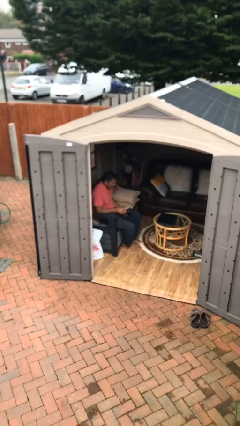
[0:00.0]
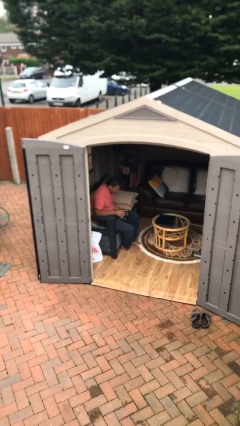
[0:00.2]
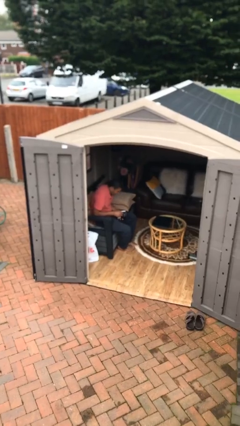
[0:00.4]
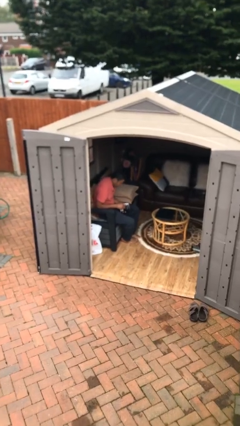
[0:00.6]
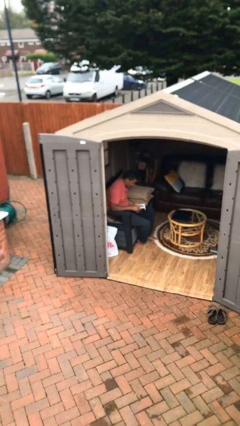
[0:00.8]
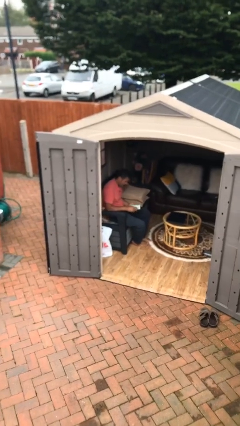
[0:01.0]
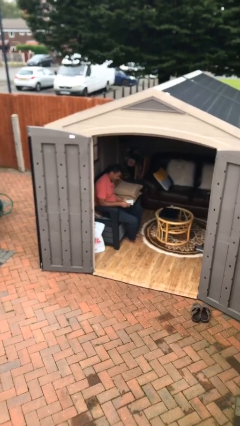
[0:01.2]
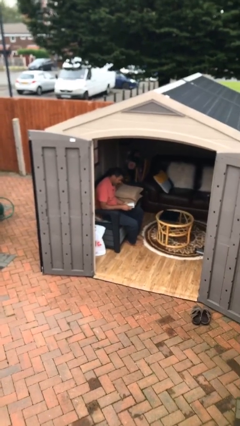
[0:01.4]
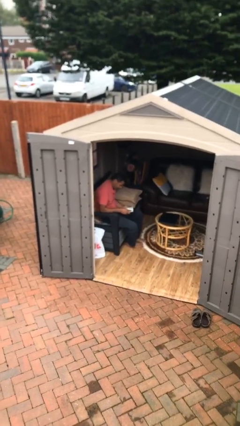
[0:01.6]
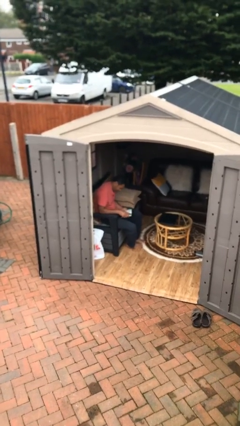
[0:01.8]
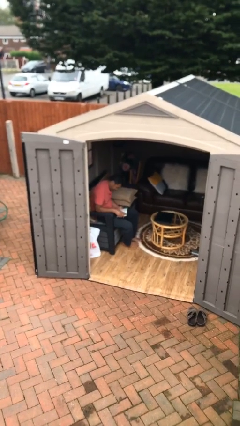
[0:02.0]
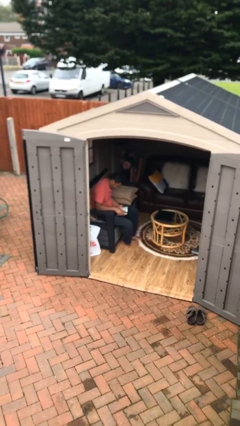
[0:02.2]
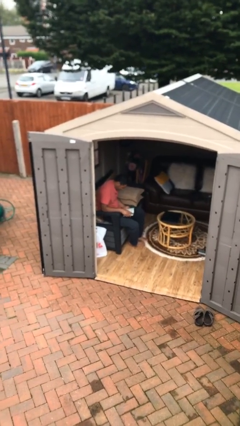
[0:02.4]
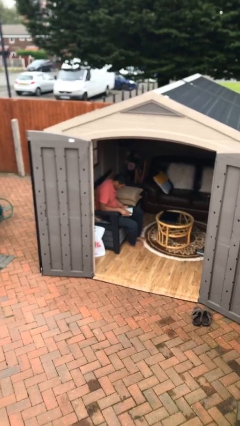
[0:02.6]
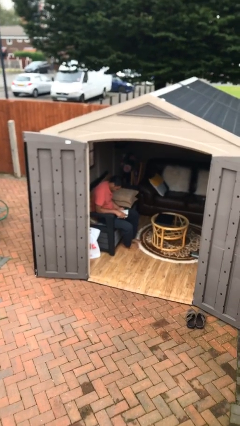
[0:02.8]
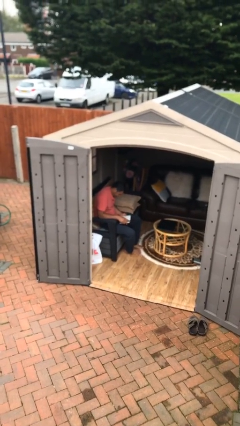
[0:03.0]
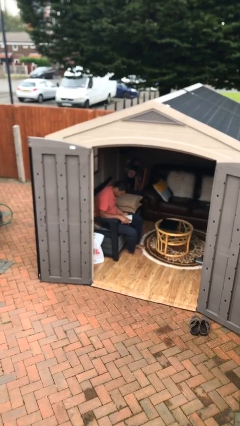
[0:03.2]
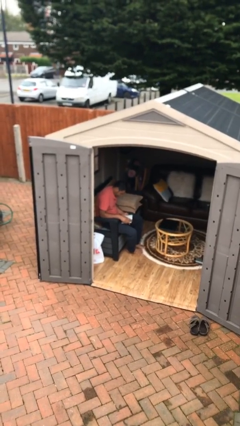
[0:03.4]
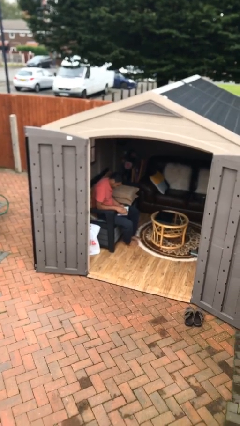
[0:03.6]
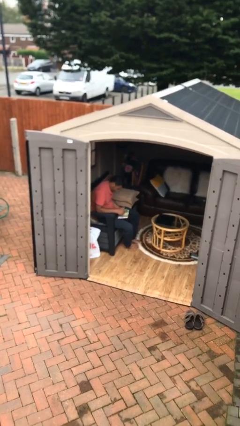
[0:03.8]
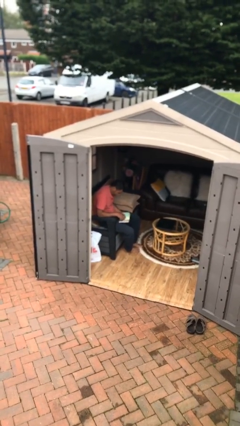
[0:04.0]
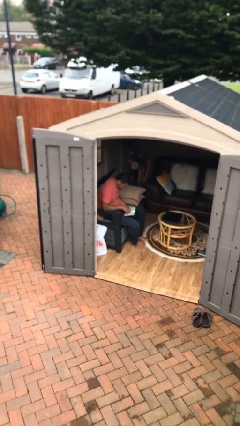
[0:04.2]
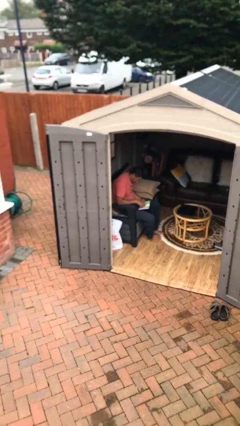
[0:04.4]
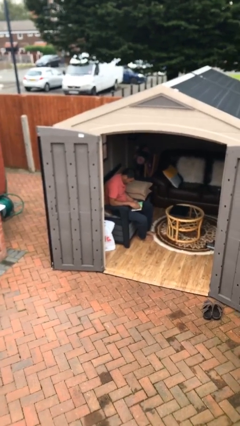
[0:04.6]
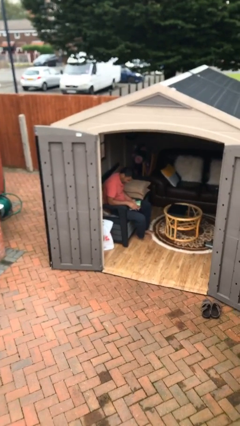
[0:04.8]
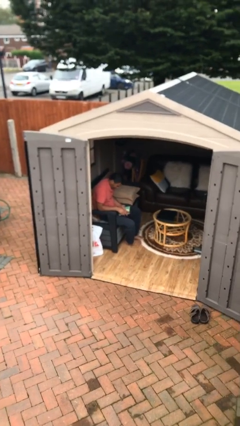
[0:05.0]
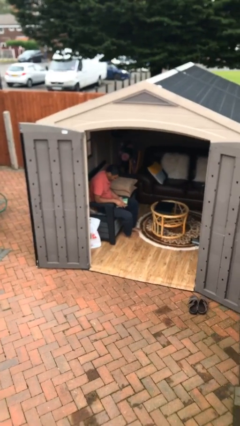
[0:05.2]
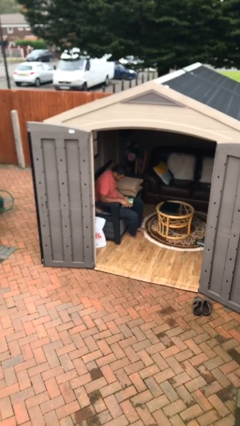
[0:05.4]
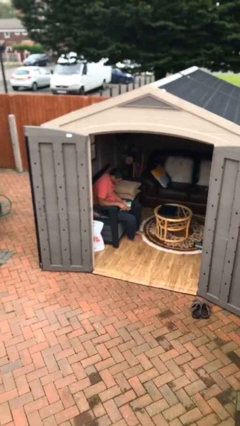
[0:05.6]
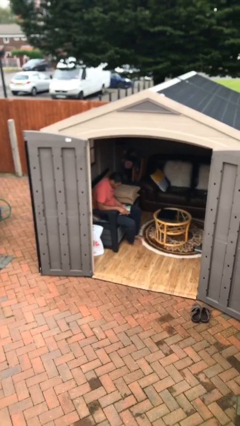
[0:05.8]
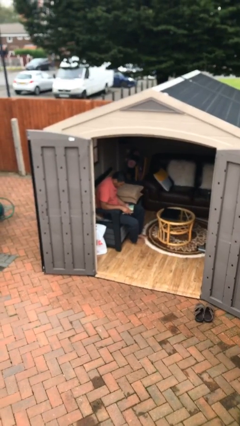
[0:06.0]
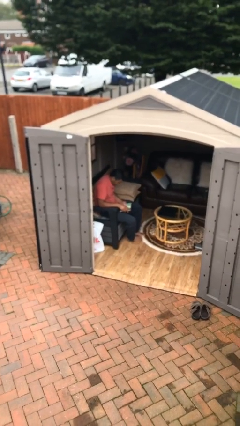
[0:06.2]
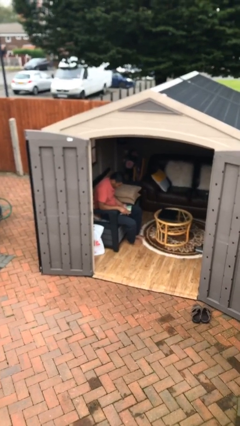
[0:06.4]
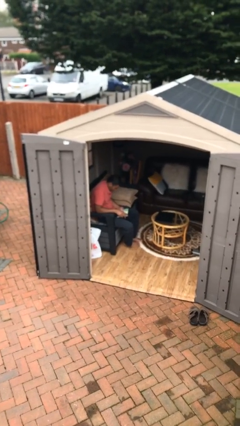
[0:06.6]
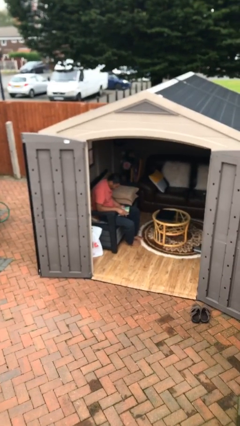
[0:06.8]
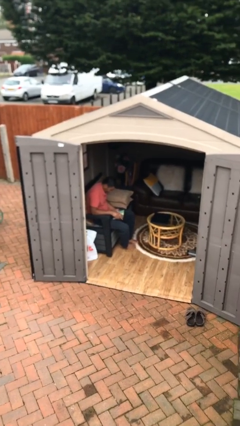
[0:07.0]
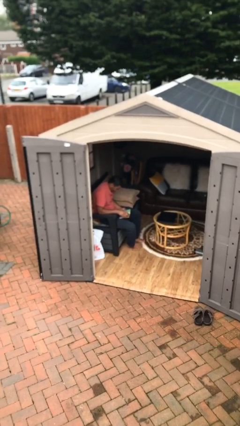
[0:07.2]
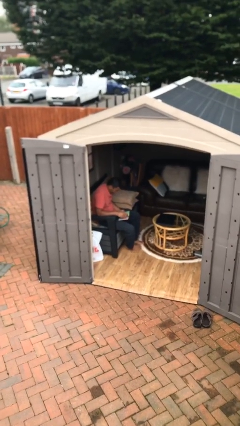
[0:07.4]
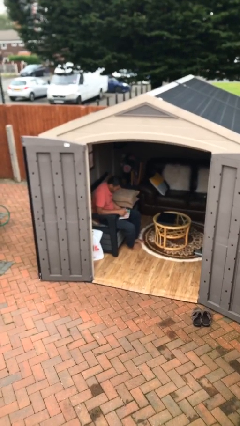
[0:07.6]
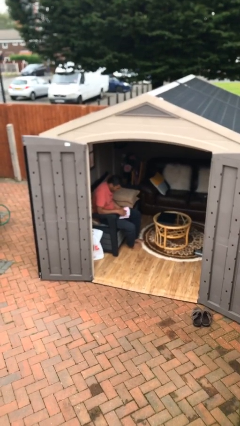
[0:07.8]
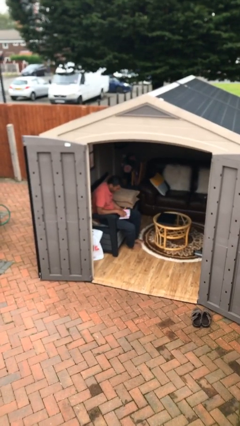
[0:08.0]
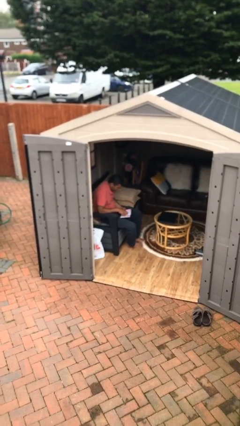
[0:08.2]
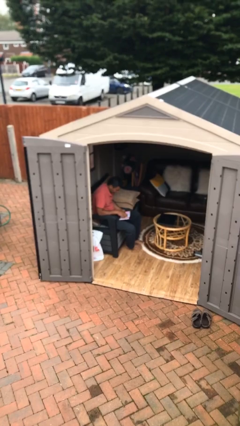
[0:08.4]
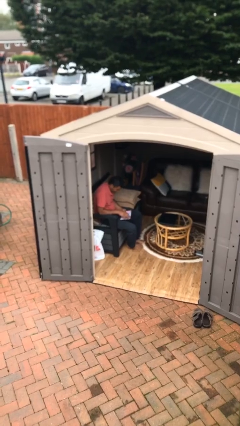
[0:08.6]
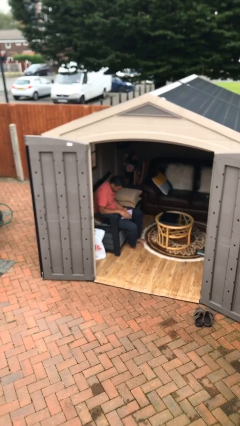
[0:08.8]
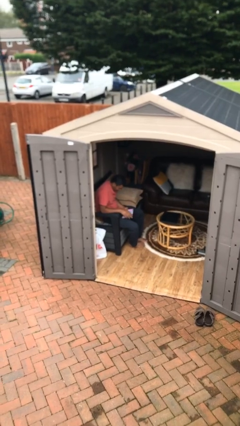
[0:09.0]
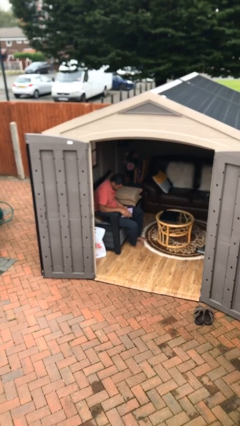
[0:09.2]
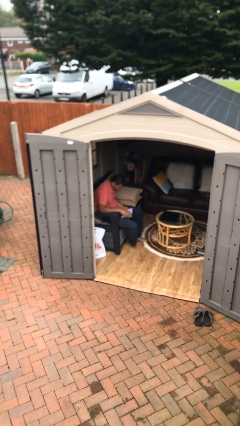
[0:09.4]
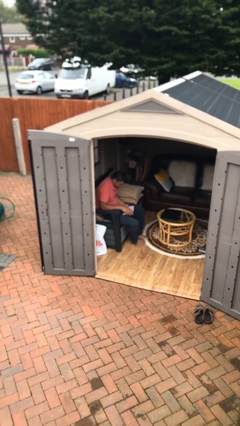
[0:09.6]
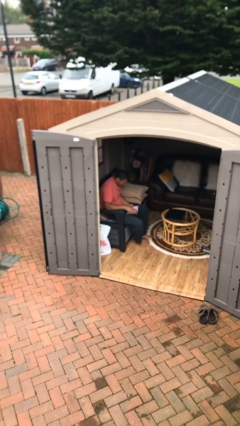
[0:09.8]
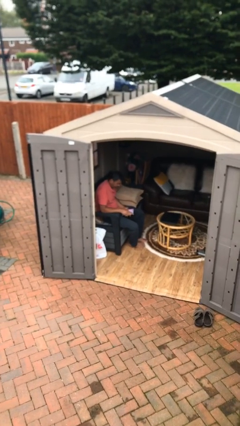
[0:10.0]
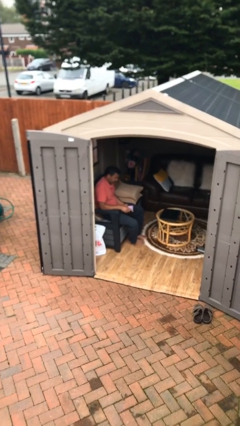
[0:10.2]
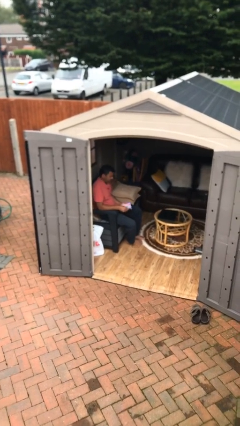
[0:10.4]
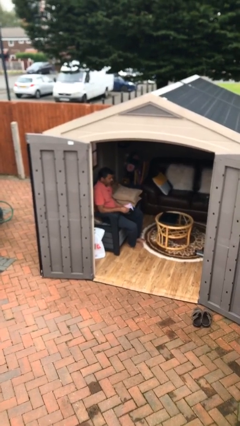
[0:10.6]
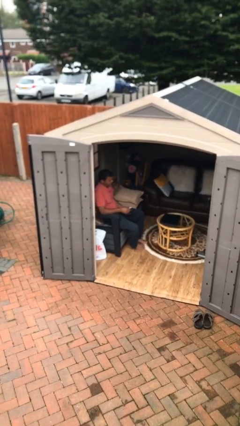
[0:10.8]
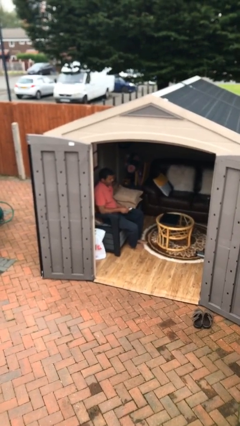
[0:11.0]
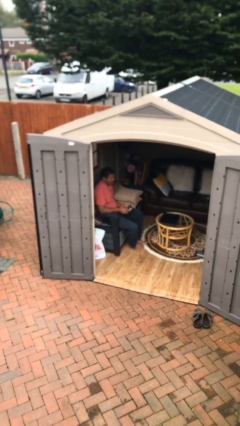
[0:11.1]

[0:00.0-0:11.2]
person reads document

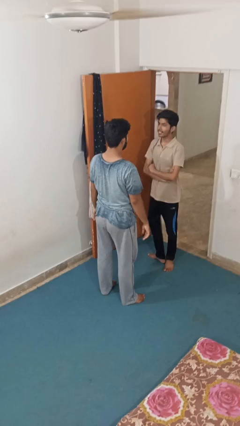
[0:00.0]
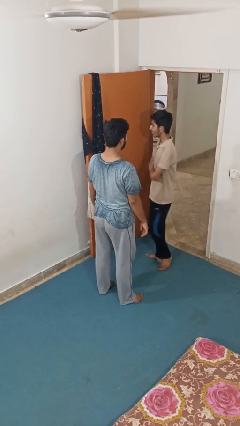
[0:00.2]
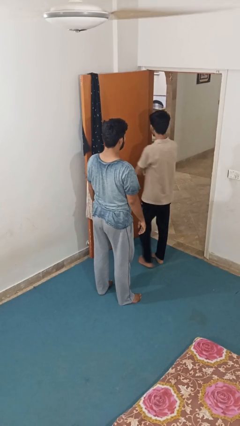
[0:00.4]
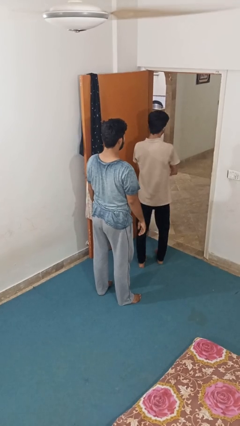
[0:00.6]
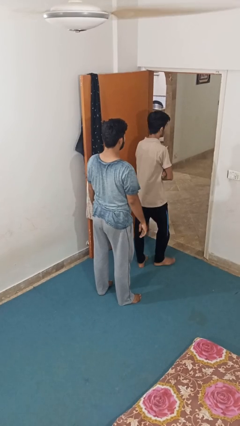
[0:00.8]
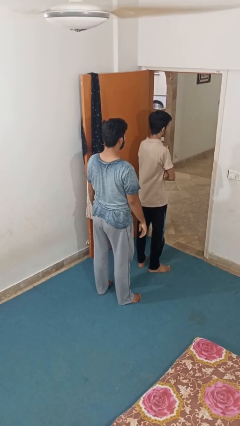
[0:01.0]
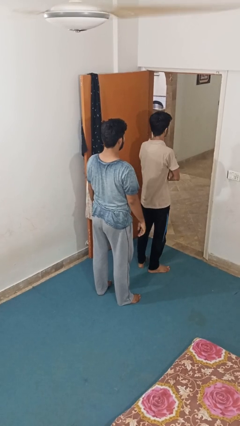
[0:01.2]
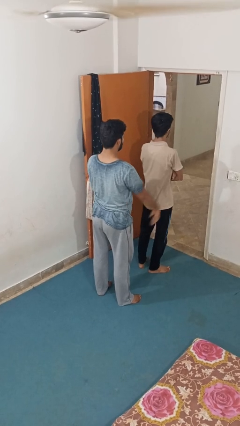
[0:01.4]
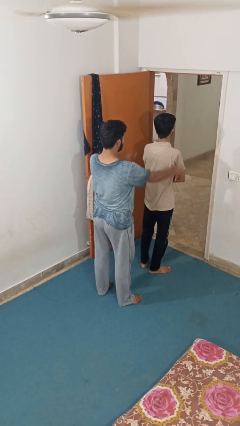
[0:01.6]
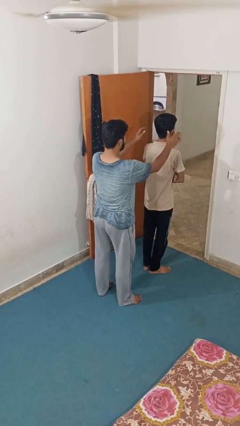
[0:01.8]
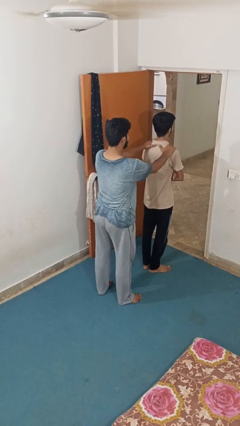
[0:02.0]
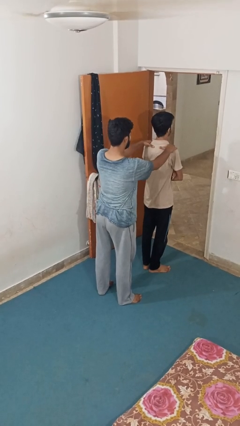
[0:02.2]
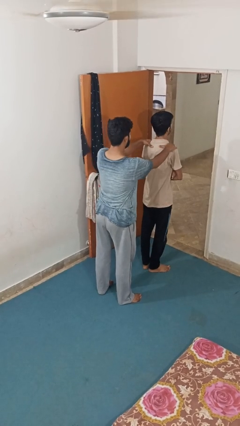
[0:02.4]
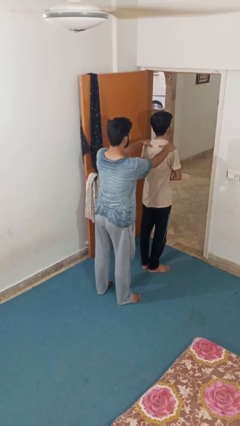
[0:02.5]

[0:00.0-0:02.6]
person grabs person by shoulder

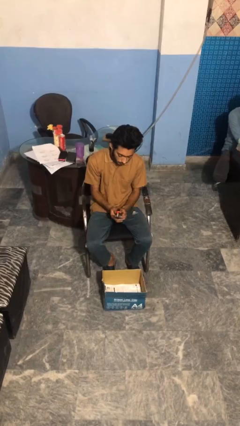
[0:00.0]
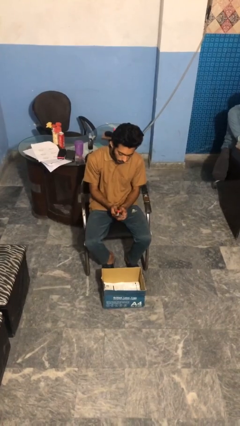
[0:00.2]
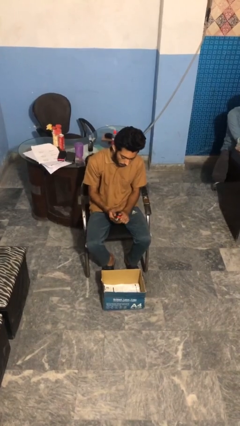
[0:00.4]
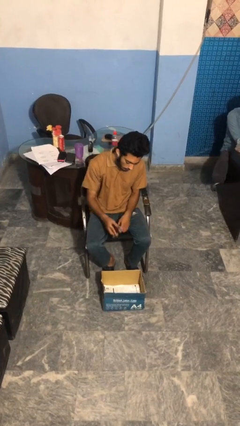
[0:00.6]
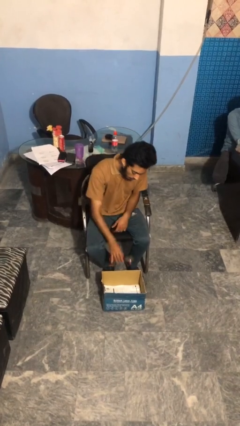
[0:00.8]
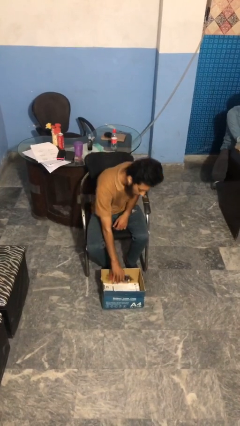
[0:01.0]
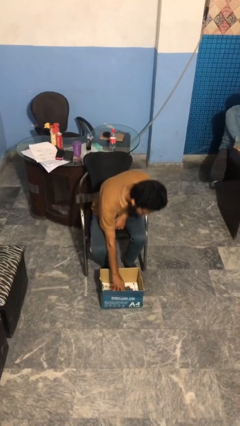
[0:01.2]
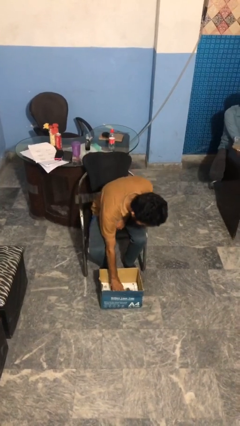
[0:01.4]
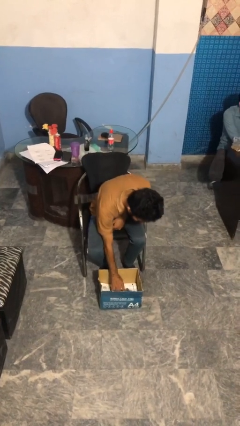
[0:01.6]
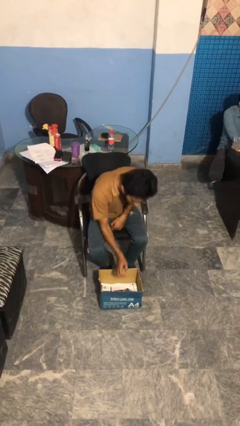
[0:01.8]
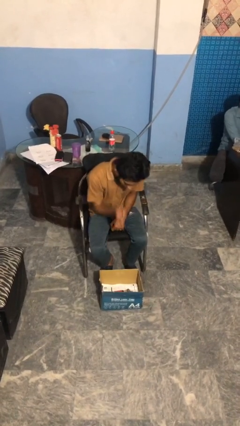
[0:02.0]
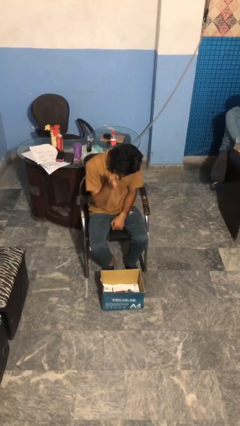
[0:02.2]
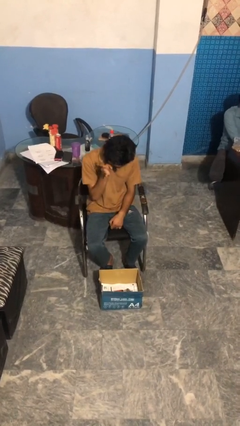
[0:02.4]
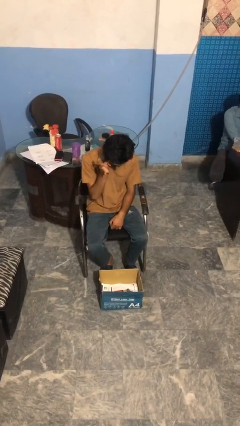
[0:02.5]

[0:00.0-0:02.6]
person puts object into box

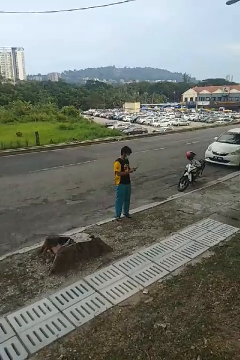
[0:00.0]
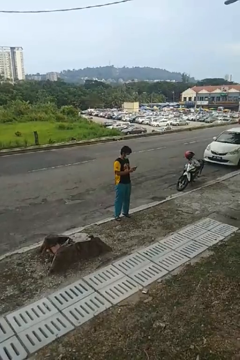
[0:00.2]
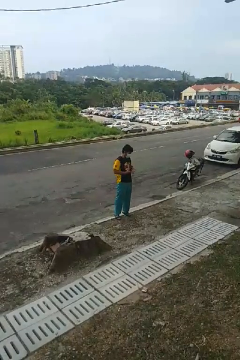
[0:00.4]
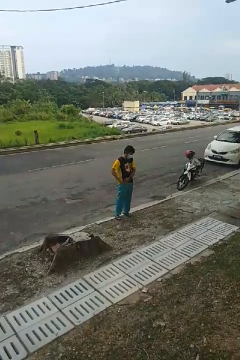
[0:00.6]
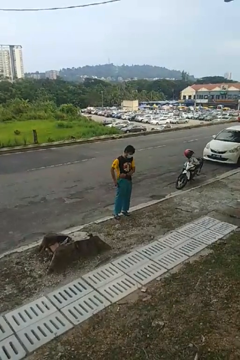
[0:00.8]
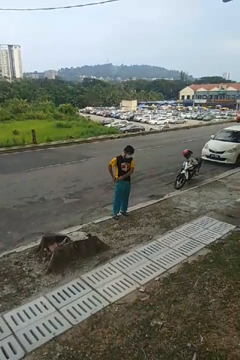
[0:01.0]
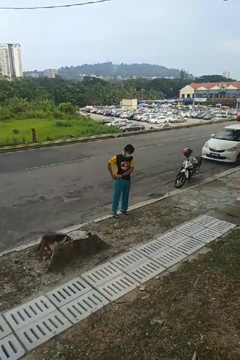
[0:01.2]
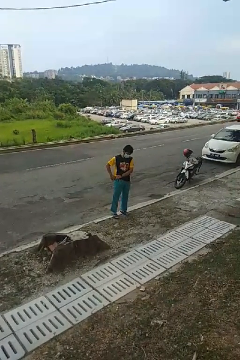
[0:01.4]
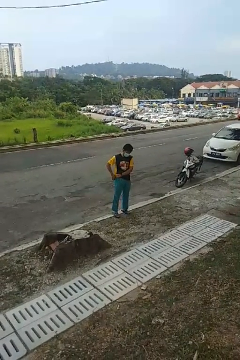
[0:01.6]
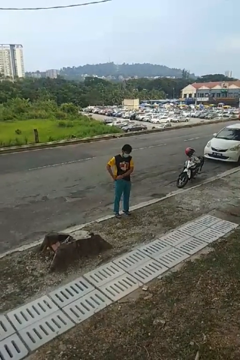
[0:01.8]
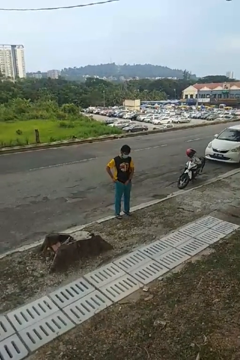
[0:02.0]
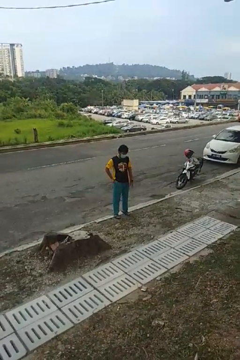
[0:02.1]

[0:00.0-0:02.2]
person puts phone into pocket
